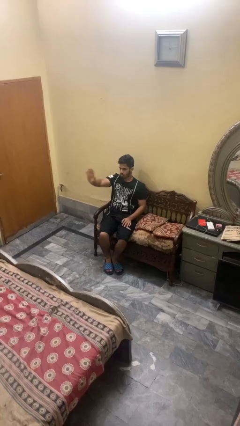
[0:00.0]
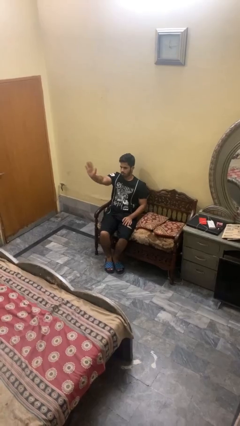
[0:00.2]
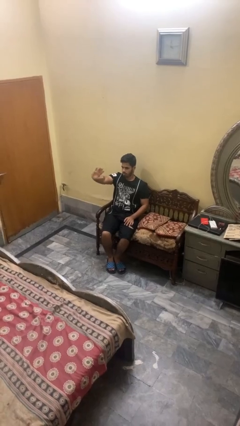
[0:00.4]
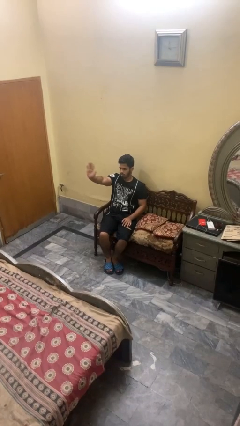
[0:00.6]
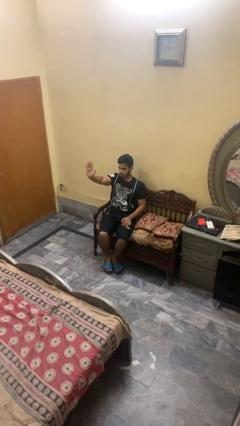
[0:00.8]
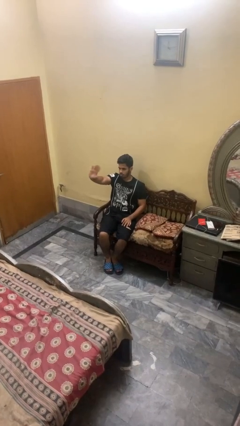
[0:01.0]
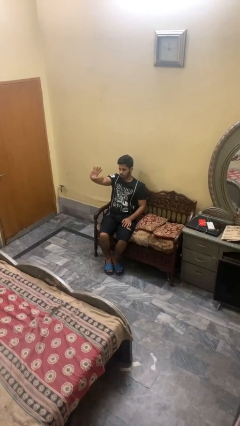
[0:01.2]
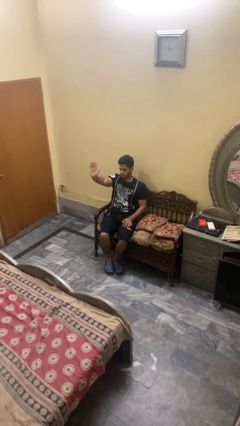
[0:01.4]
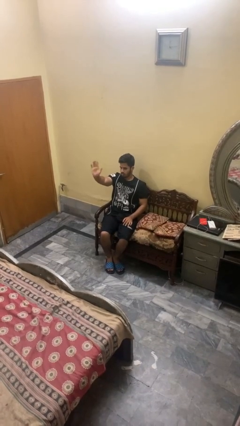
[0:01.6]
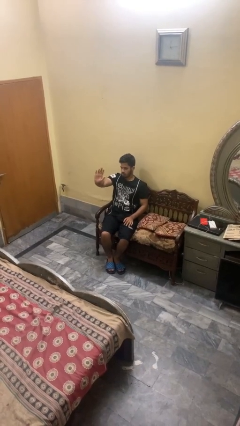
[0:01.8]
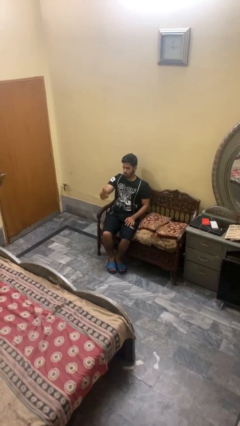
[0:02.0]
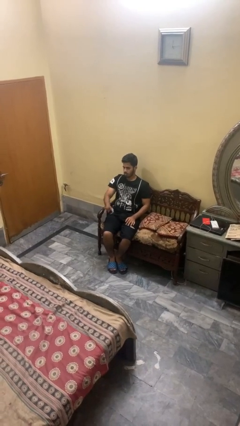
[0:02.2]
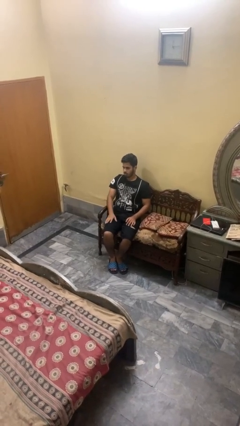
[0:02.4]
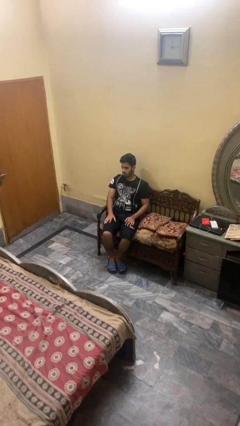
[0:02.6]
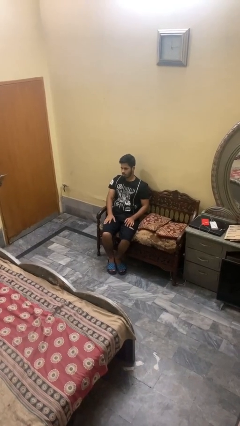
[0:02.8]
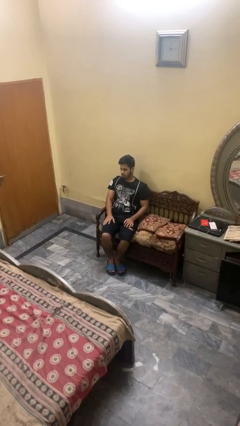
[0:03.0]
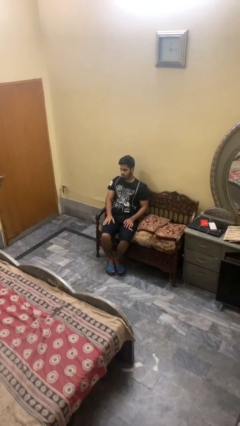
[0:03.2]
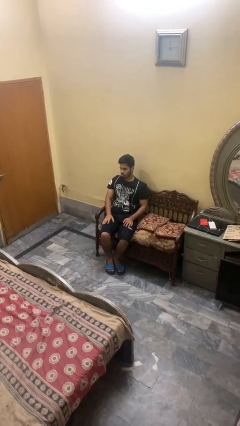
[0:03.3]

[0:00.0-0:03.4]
person waves at person

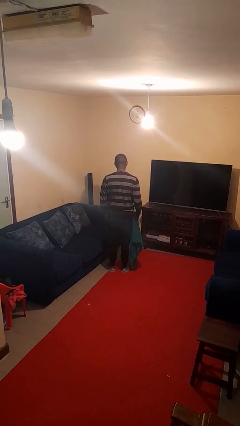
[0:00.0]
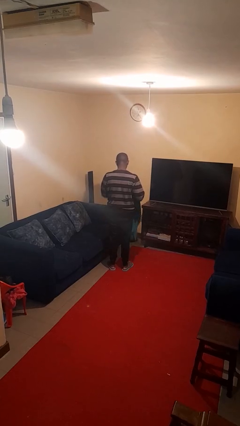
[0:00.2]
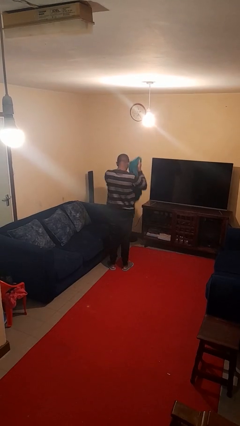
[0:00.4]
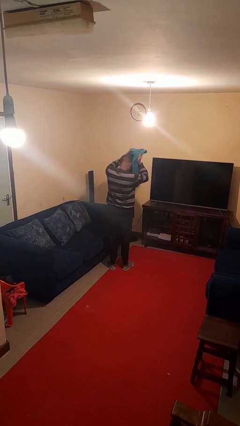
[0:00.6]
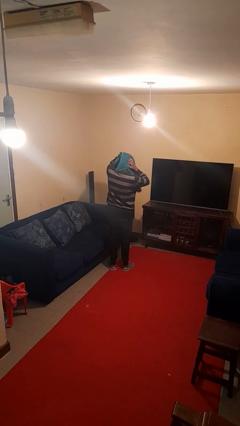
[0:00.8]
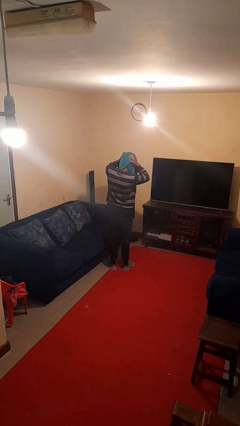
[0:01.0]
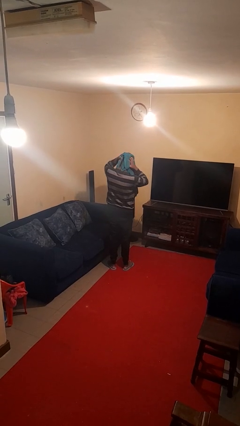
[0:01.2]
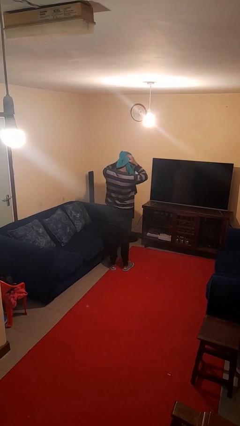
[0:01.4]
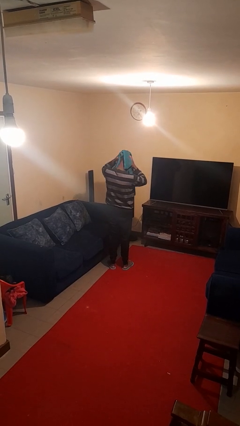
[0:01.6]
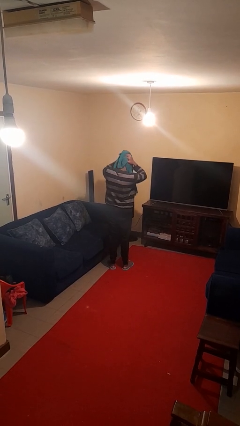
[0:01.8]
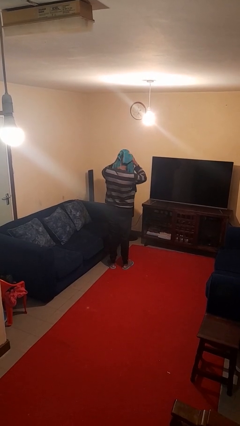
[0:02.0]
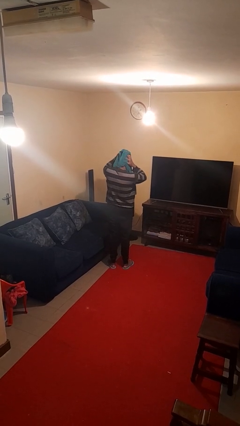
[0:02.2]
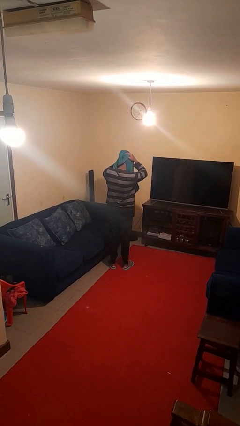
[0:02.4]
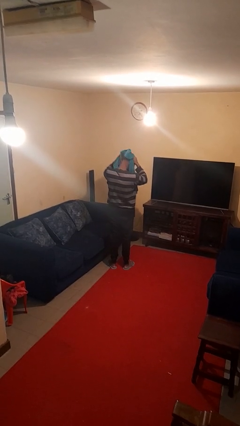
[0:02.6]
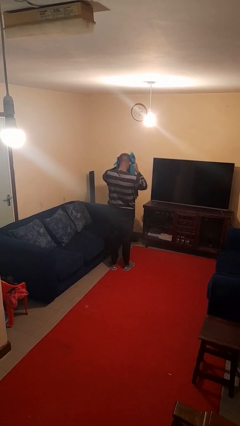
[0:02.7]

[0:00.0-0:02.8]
person dries hair with towel

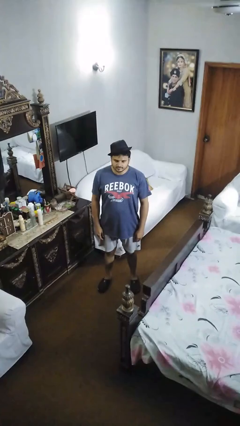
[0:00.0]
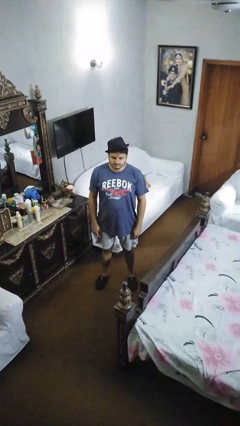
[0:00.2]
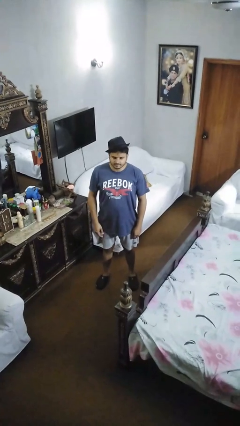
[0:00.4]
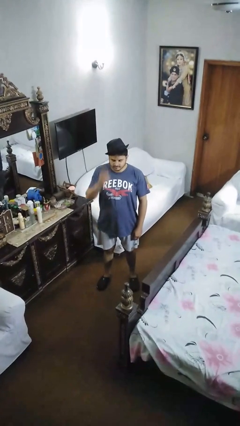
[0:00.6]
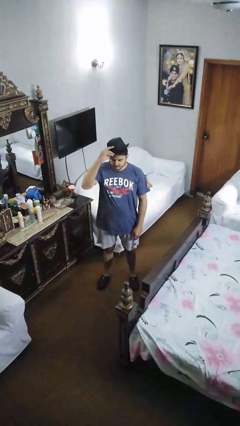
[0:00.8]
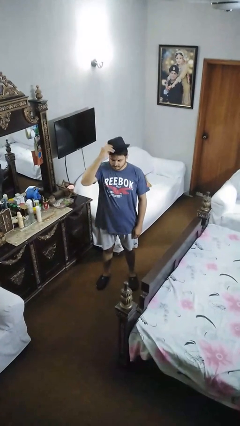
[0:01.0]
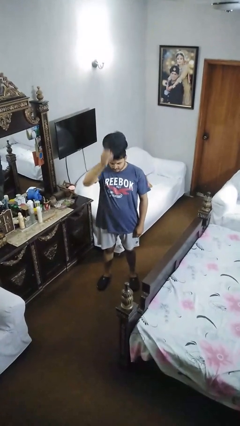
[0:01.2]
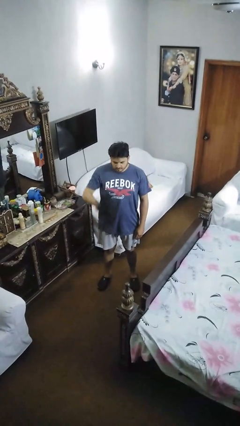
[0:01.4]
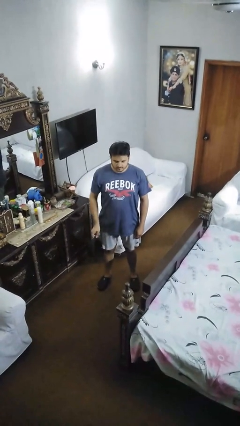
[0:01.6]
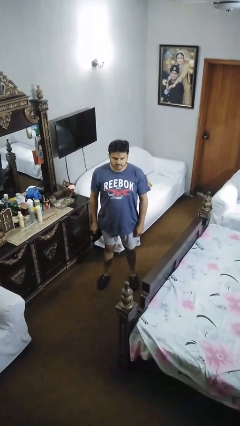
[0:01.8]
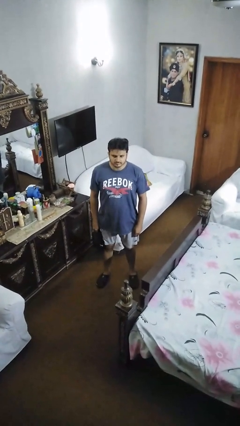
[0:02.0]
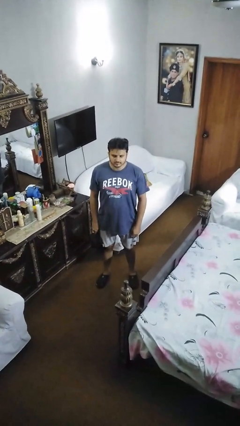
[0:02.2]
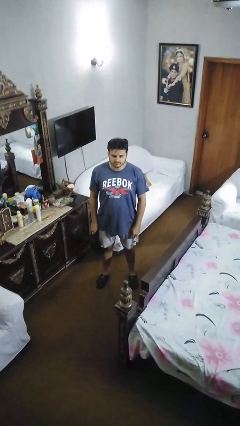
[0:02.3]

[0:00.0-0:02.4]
person takes off hat

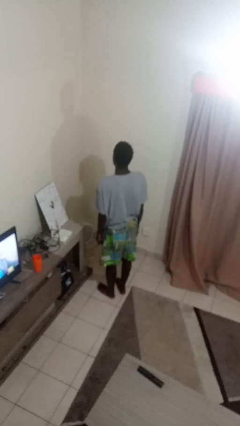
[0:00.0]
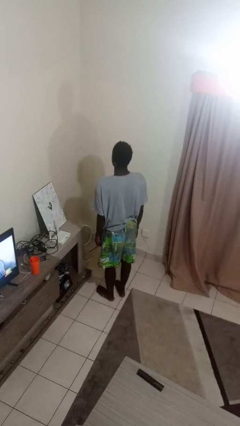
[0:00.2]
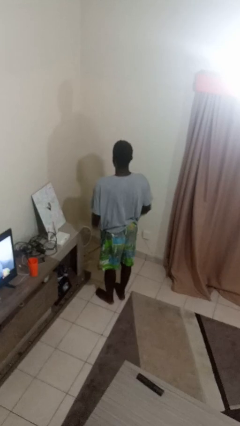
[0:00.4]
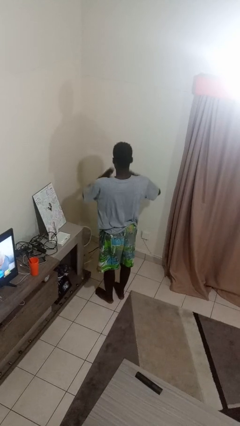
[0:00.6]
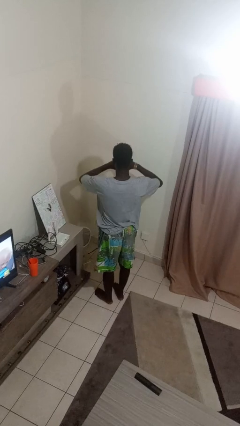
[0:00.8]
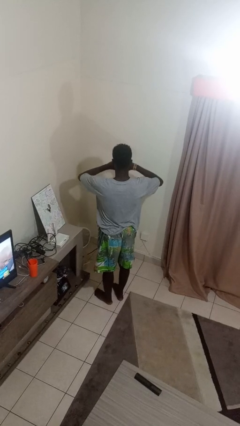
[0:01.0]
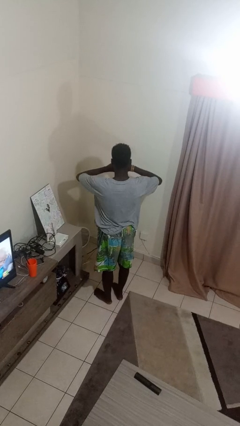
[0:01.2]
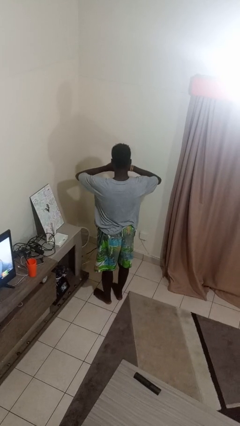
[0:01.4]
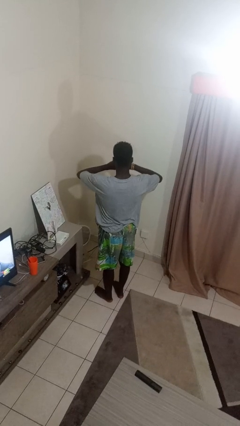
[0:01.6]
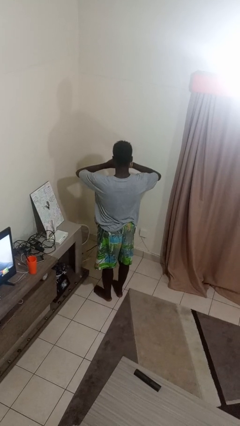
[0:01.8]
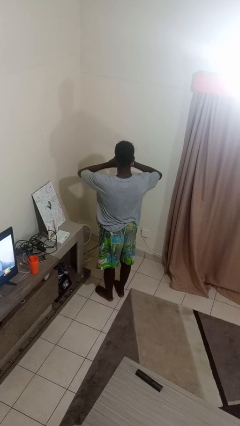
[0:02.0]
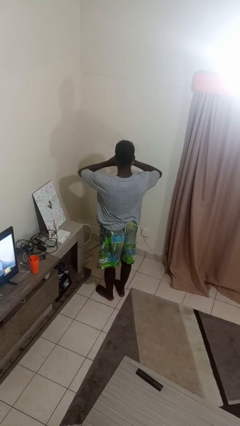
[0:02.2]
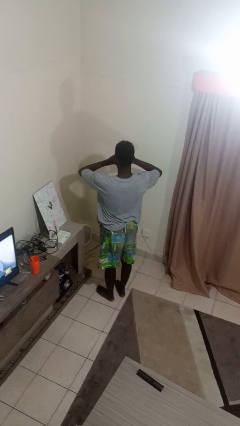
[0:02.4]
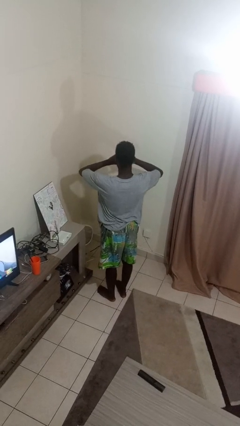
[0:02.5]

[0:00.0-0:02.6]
person gestures heart

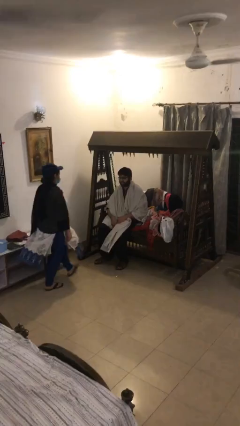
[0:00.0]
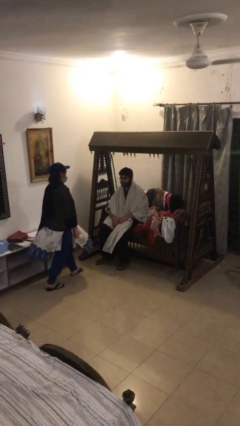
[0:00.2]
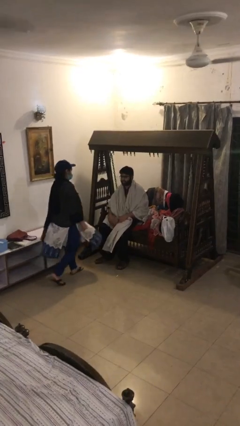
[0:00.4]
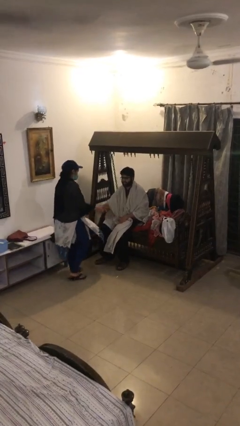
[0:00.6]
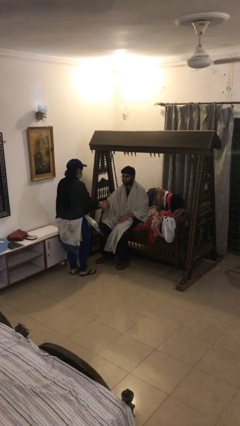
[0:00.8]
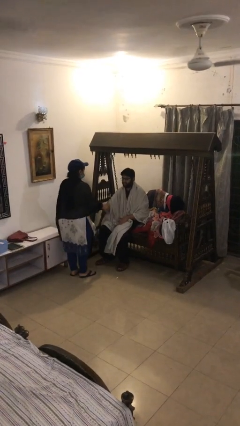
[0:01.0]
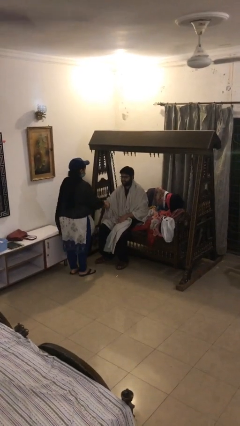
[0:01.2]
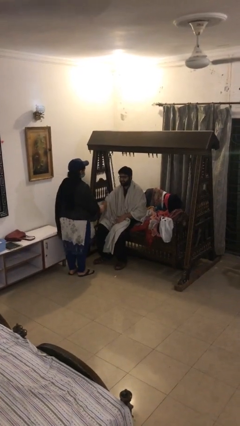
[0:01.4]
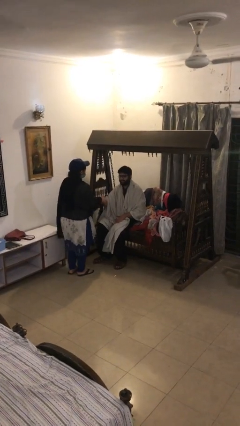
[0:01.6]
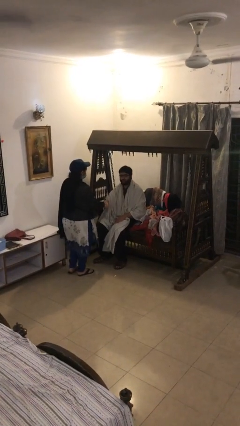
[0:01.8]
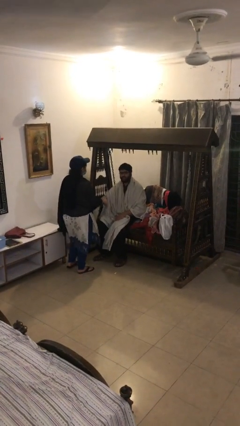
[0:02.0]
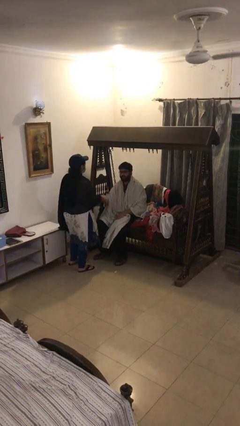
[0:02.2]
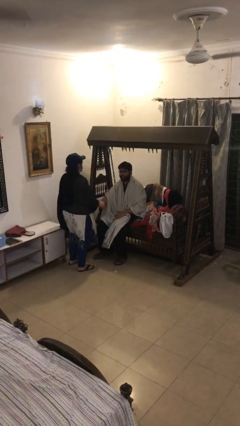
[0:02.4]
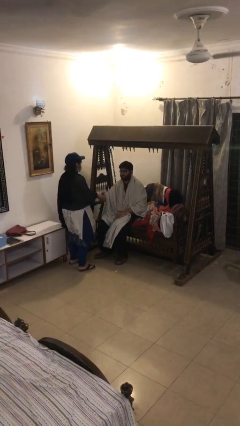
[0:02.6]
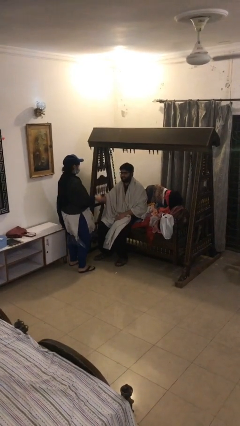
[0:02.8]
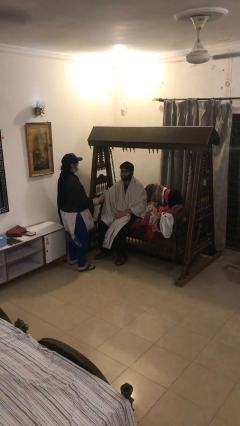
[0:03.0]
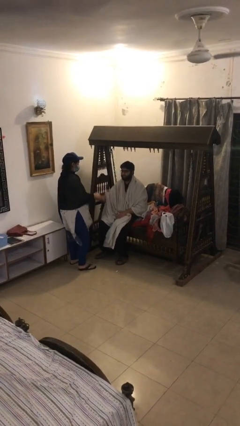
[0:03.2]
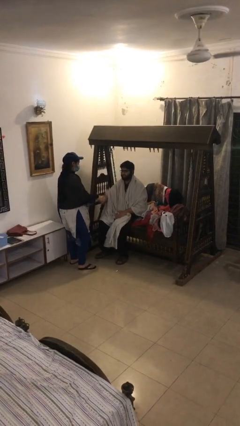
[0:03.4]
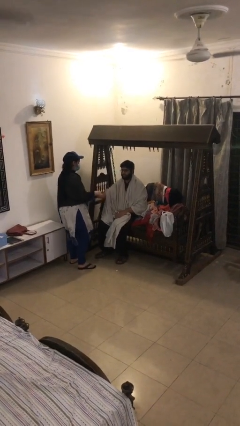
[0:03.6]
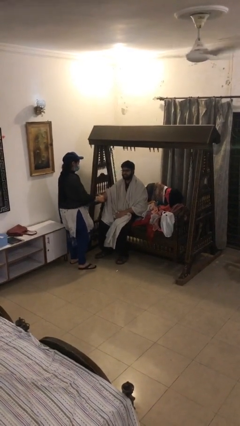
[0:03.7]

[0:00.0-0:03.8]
person shakes hand

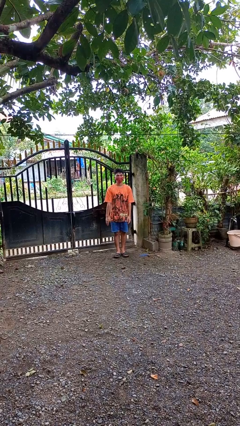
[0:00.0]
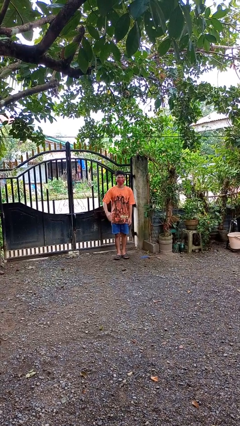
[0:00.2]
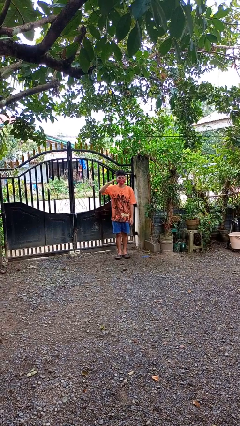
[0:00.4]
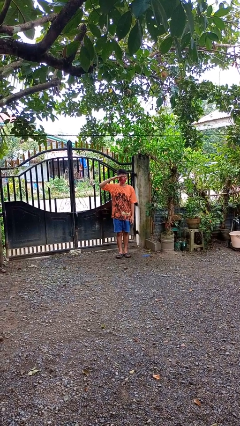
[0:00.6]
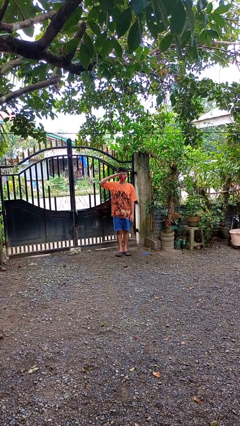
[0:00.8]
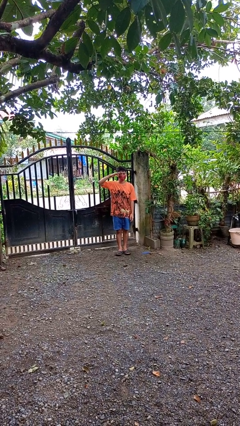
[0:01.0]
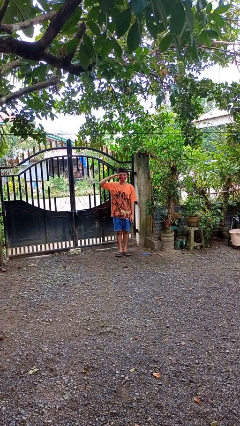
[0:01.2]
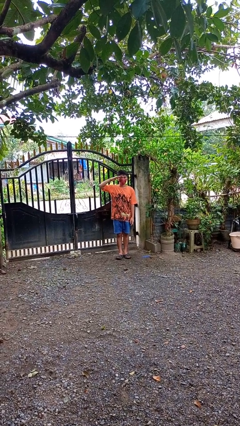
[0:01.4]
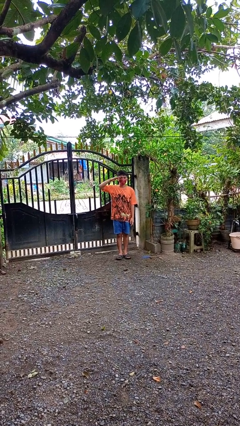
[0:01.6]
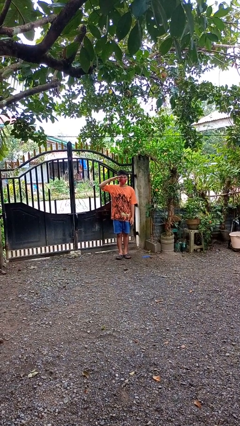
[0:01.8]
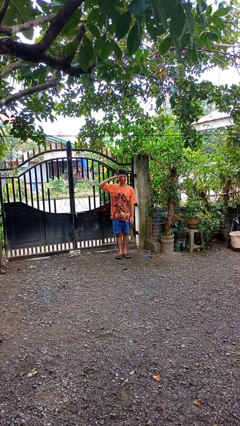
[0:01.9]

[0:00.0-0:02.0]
person salutes
